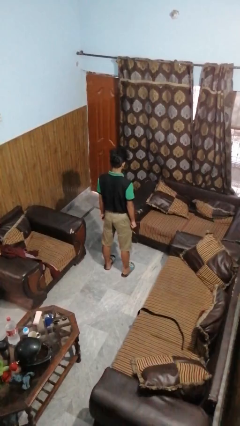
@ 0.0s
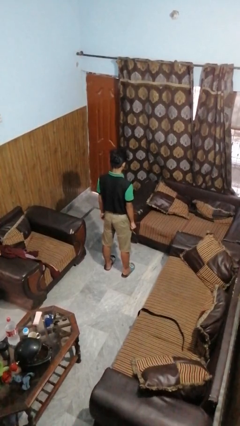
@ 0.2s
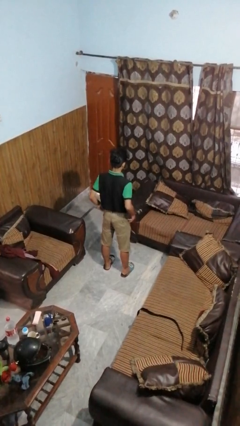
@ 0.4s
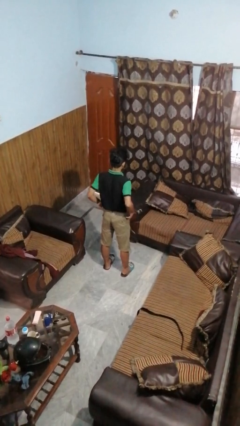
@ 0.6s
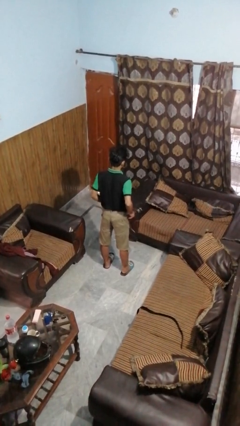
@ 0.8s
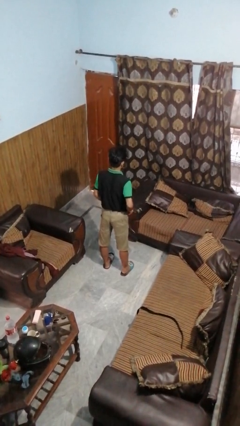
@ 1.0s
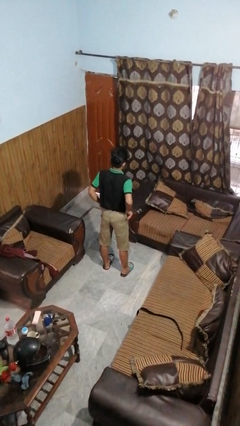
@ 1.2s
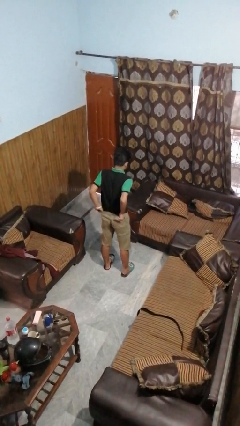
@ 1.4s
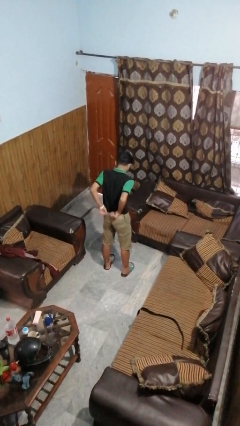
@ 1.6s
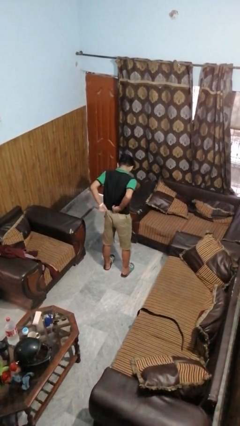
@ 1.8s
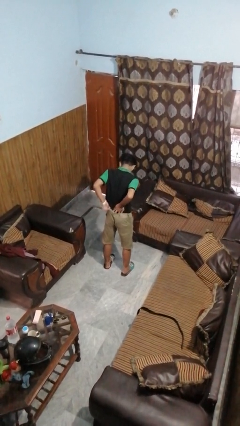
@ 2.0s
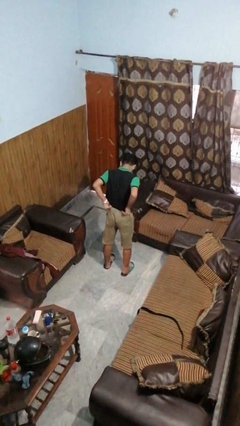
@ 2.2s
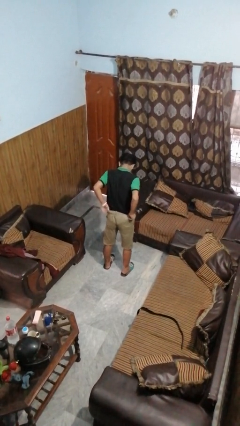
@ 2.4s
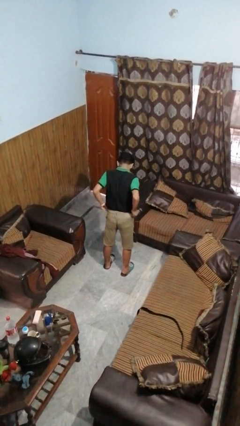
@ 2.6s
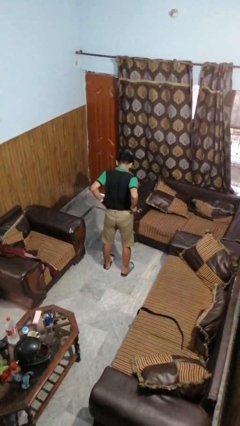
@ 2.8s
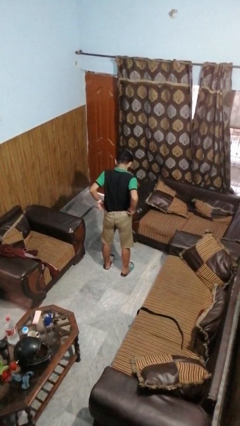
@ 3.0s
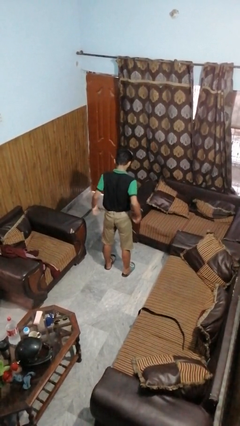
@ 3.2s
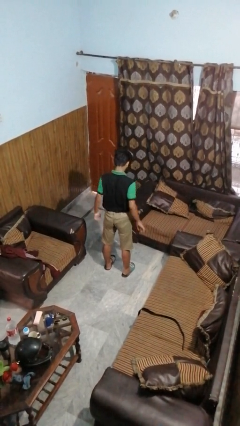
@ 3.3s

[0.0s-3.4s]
person hikes up pants

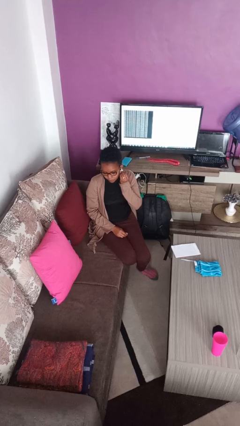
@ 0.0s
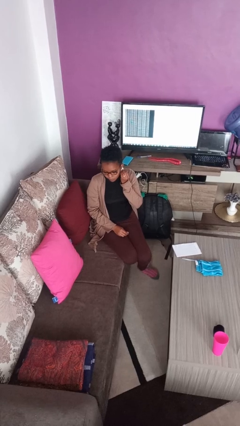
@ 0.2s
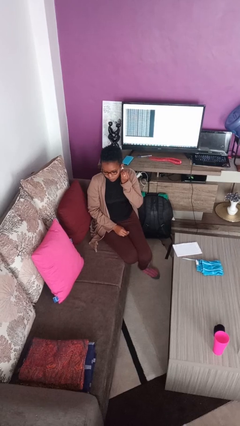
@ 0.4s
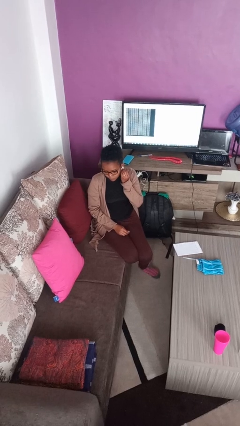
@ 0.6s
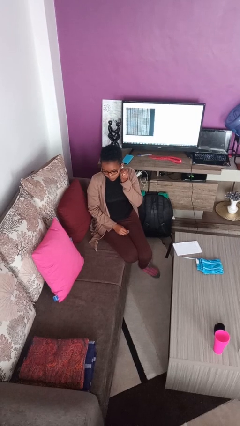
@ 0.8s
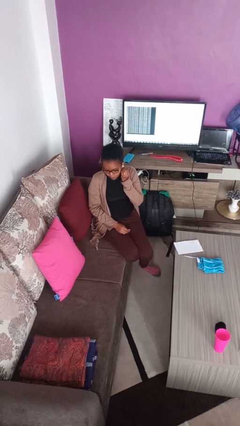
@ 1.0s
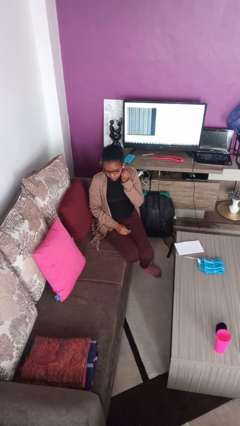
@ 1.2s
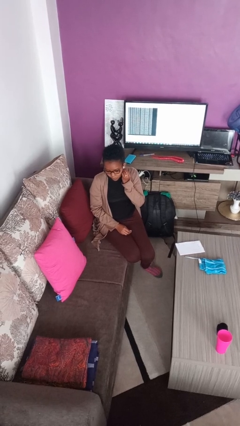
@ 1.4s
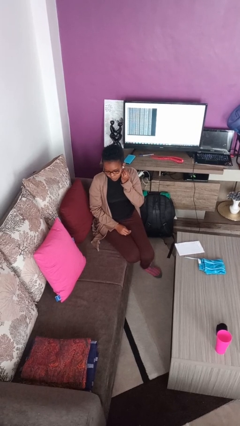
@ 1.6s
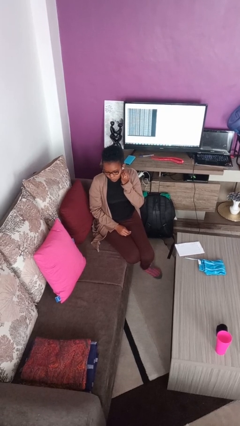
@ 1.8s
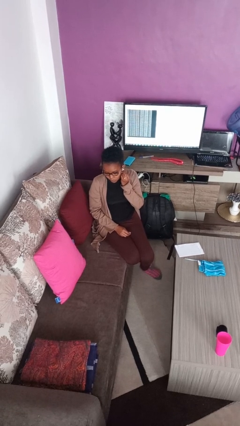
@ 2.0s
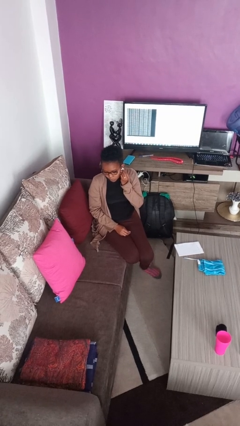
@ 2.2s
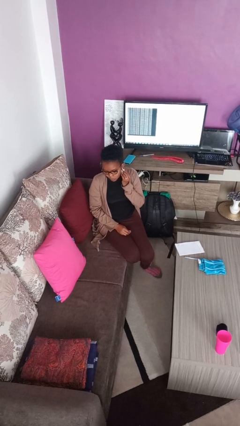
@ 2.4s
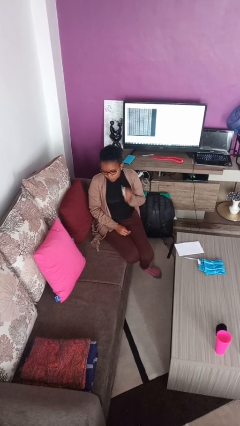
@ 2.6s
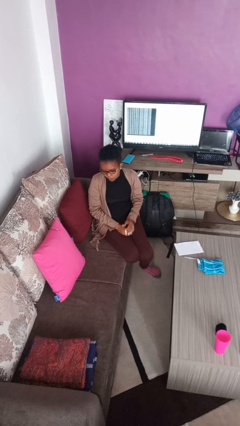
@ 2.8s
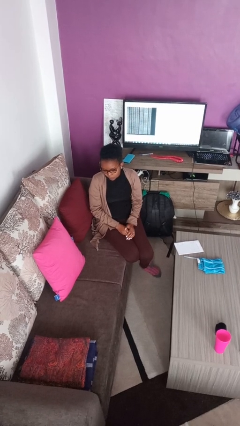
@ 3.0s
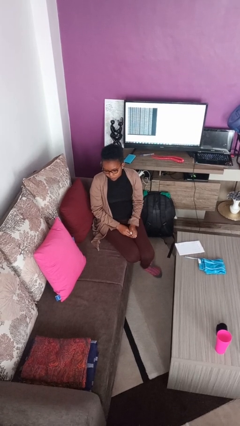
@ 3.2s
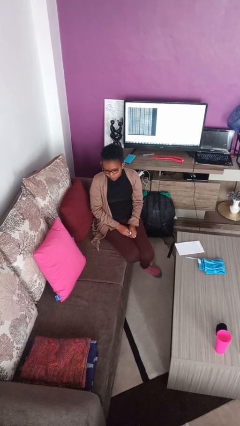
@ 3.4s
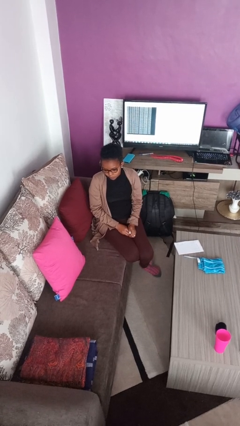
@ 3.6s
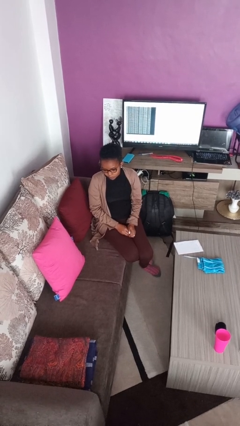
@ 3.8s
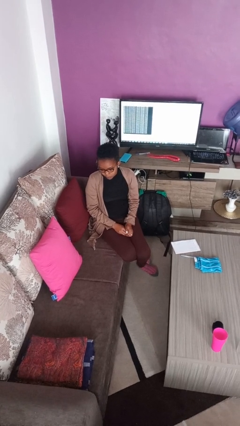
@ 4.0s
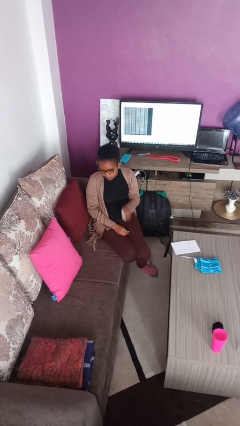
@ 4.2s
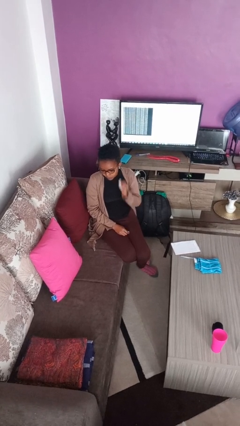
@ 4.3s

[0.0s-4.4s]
person puts on earrings

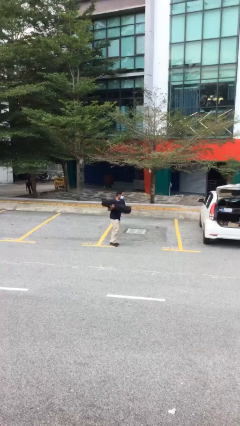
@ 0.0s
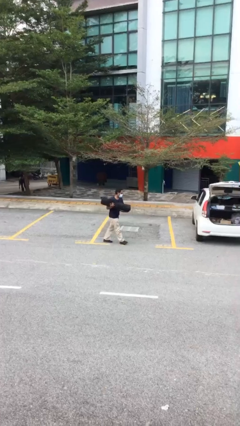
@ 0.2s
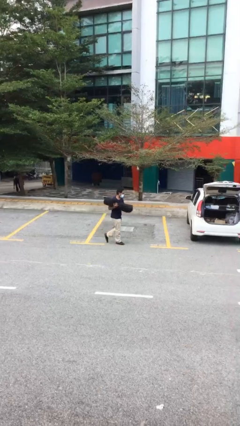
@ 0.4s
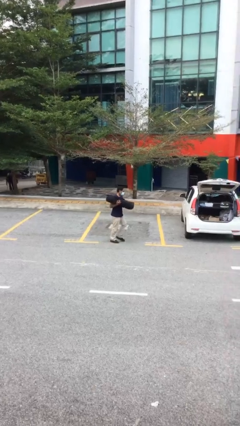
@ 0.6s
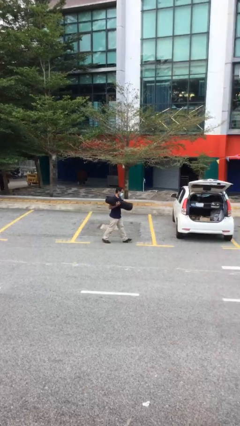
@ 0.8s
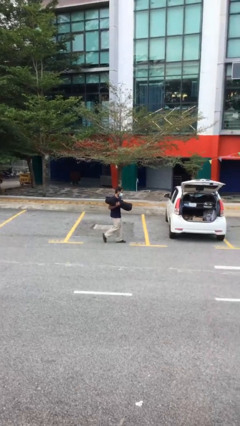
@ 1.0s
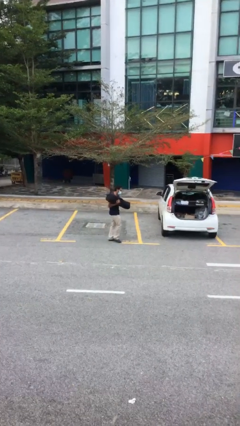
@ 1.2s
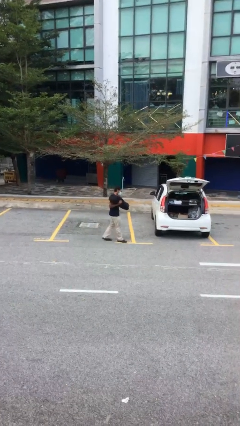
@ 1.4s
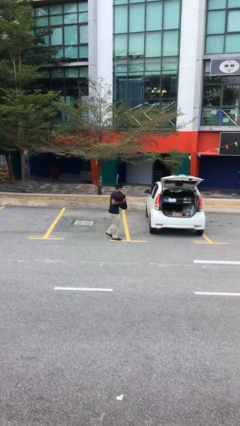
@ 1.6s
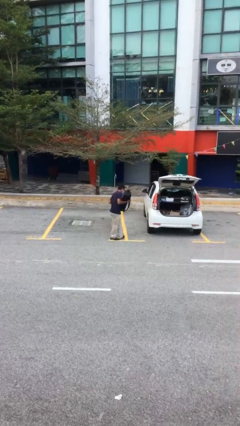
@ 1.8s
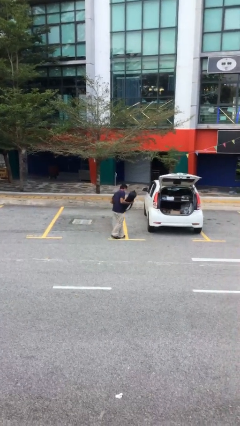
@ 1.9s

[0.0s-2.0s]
person carries heavy object

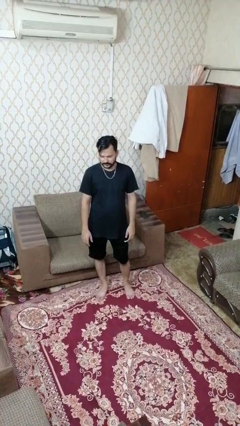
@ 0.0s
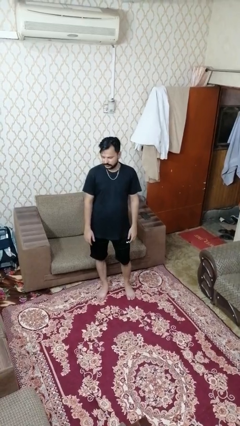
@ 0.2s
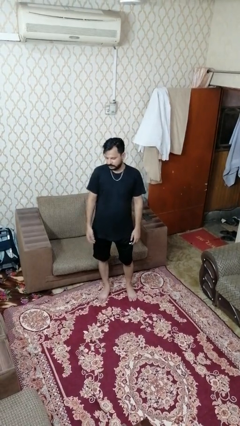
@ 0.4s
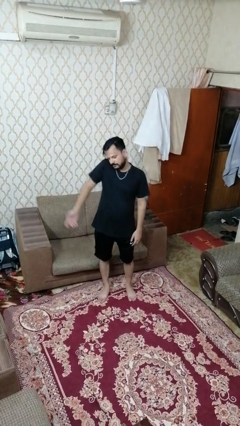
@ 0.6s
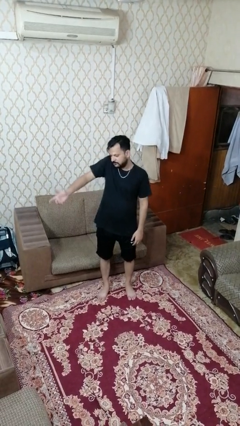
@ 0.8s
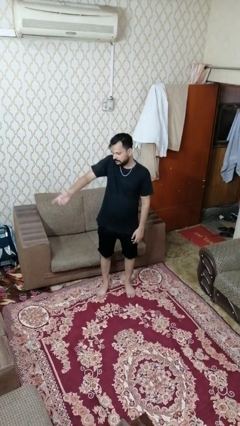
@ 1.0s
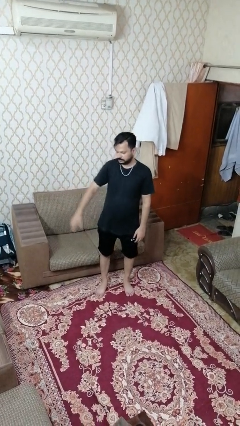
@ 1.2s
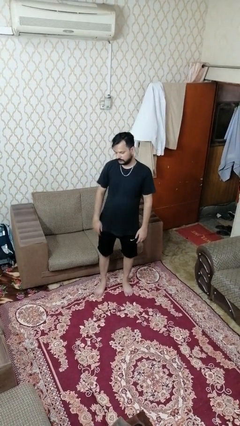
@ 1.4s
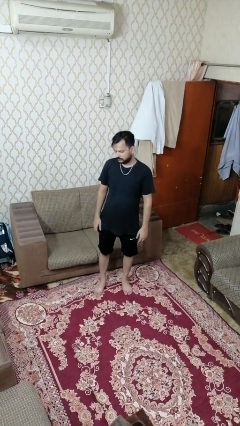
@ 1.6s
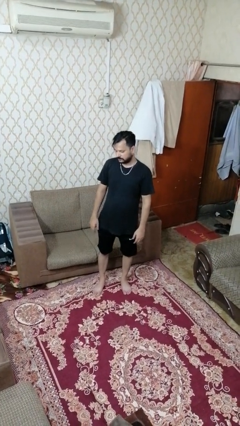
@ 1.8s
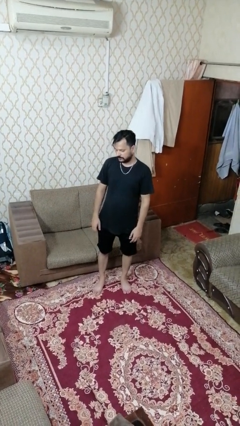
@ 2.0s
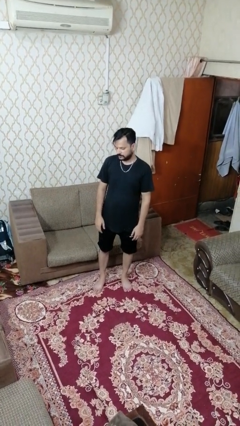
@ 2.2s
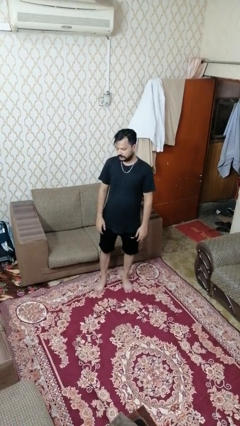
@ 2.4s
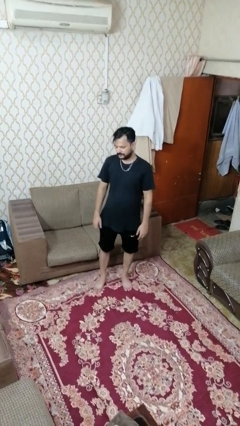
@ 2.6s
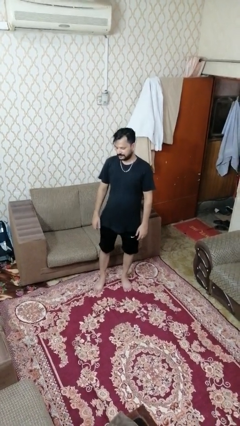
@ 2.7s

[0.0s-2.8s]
person shrugs

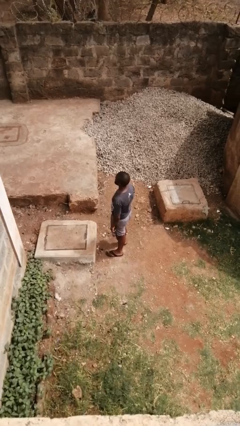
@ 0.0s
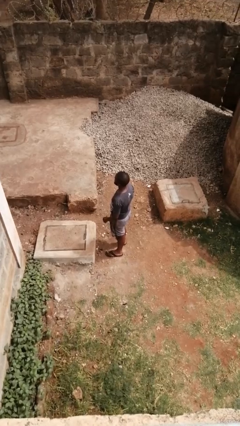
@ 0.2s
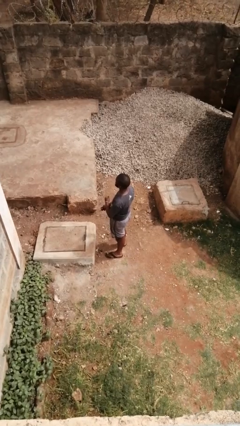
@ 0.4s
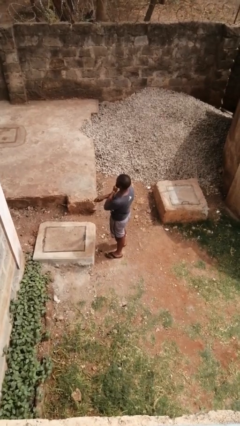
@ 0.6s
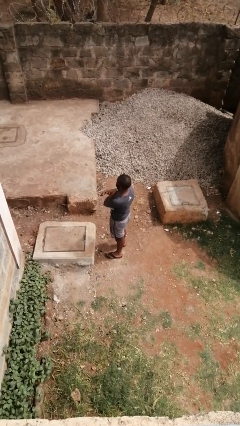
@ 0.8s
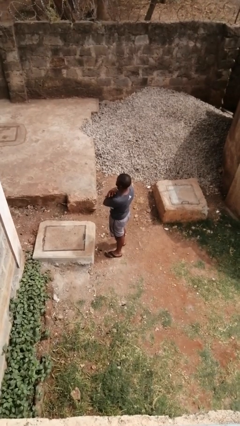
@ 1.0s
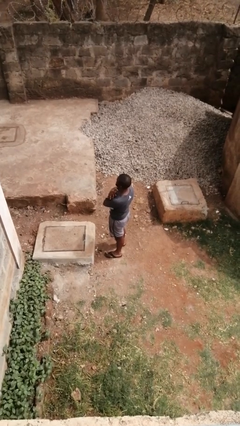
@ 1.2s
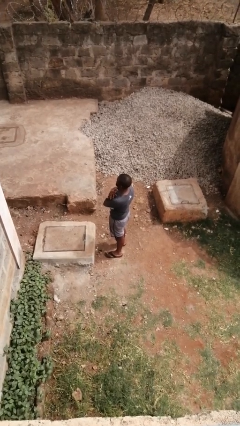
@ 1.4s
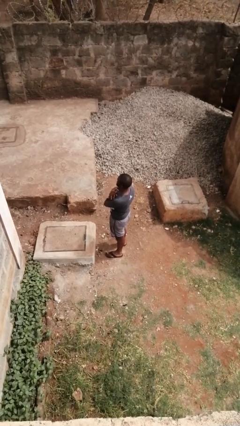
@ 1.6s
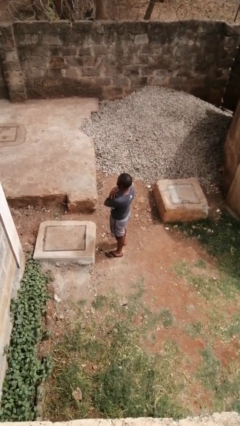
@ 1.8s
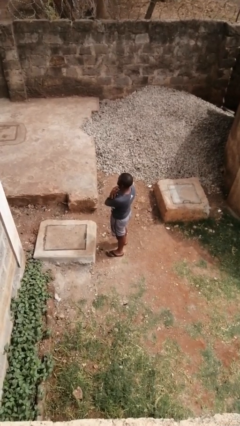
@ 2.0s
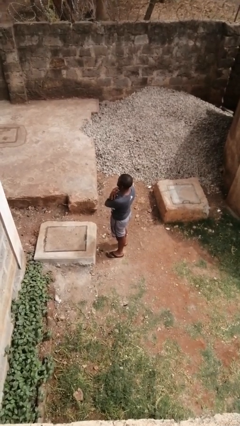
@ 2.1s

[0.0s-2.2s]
person gestures arms x

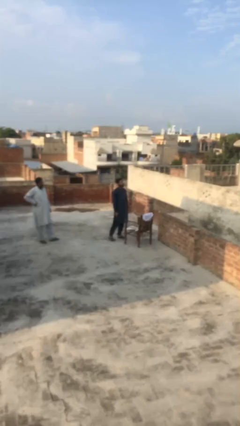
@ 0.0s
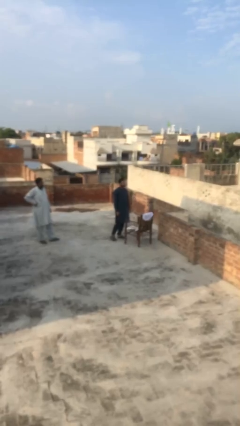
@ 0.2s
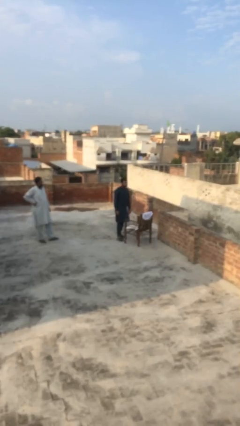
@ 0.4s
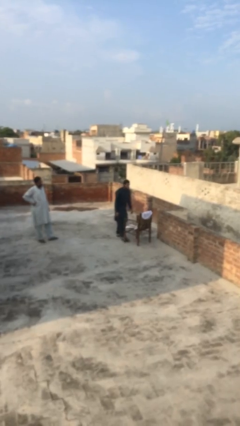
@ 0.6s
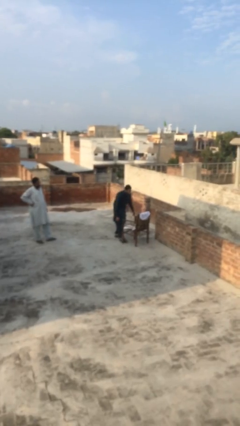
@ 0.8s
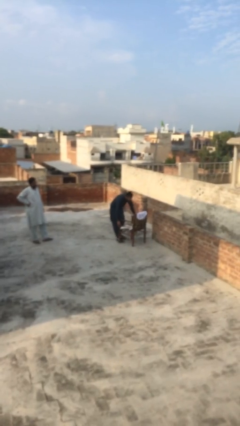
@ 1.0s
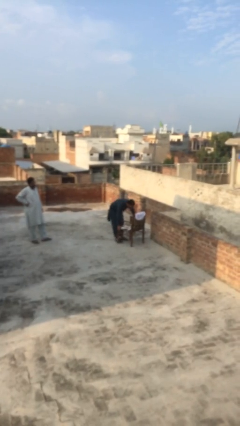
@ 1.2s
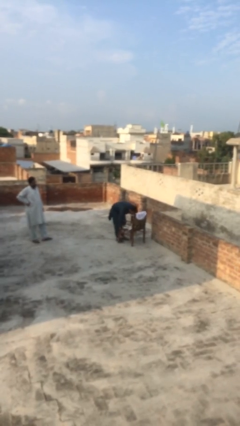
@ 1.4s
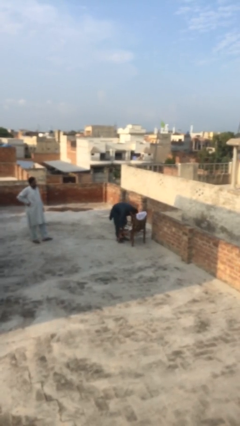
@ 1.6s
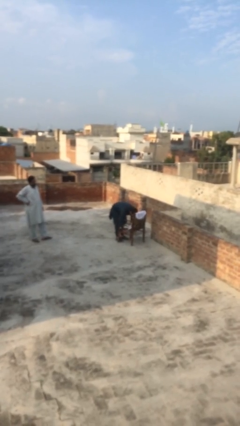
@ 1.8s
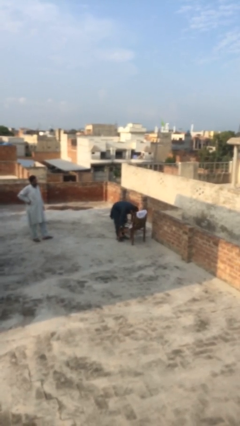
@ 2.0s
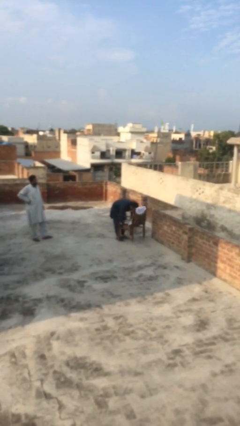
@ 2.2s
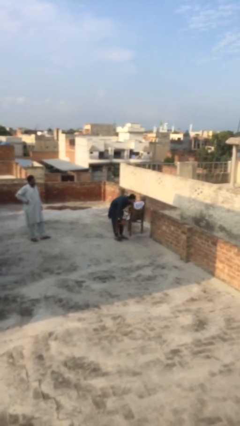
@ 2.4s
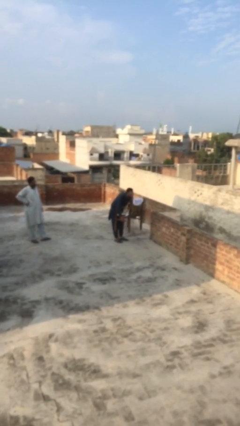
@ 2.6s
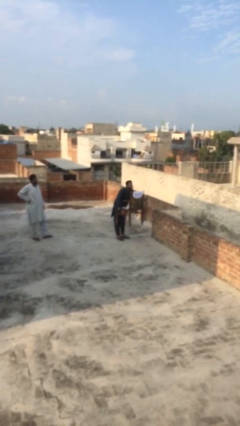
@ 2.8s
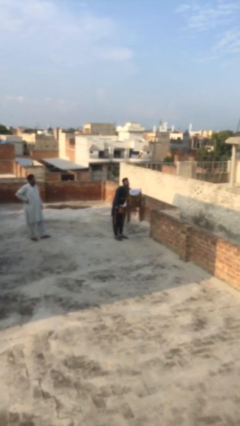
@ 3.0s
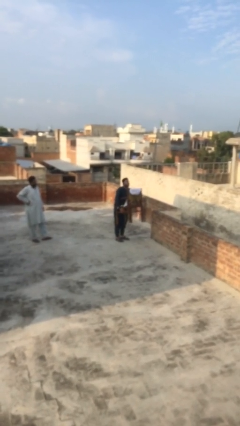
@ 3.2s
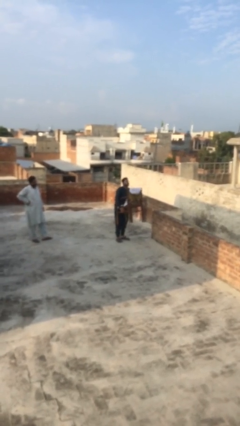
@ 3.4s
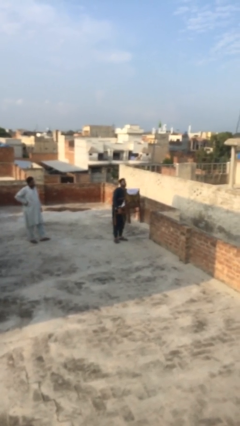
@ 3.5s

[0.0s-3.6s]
person picks up object from floor
